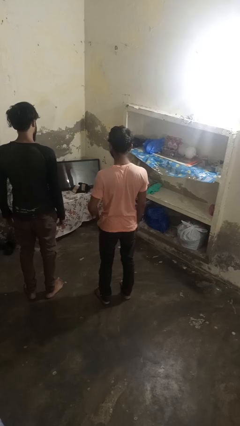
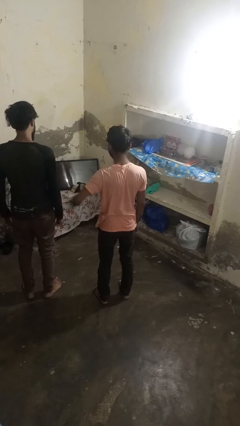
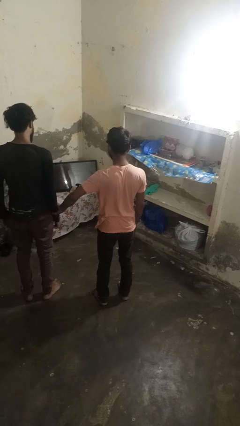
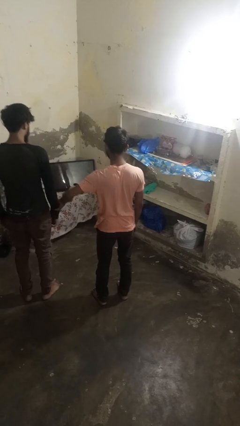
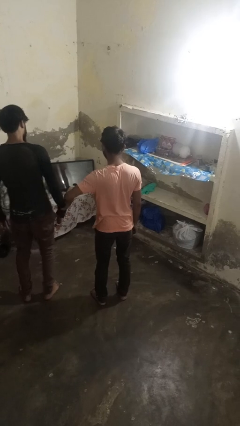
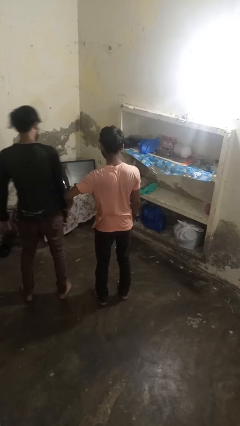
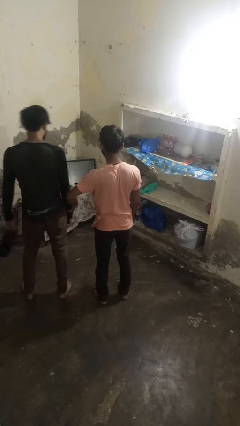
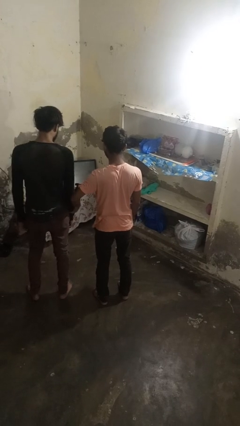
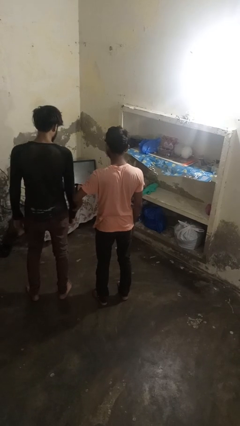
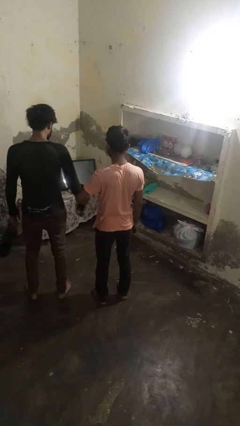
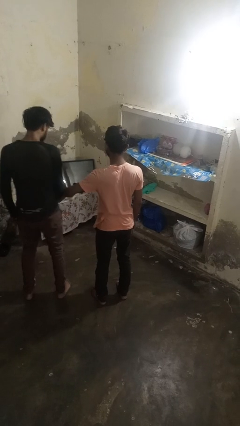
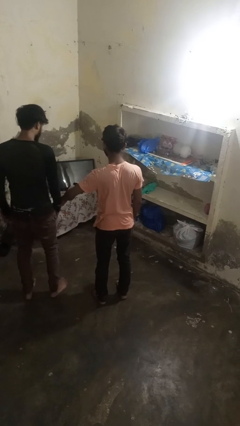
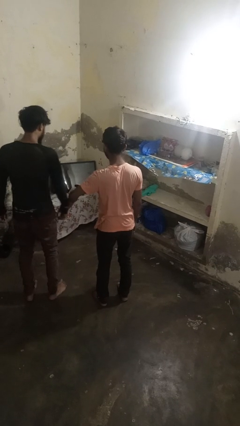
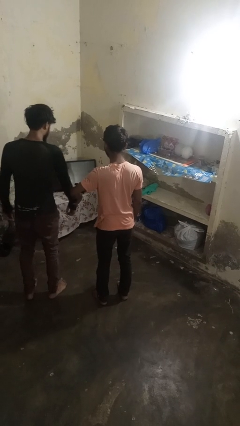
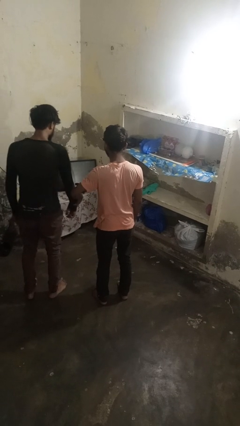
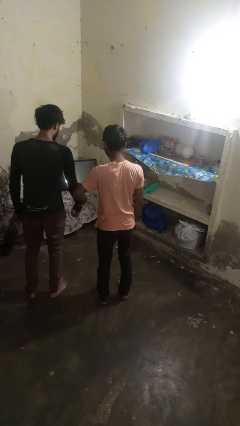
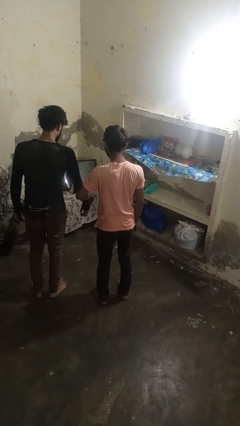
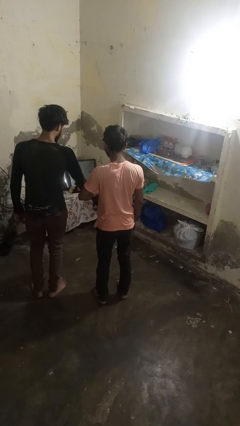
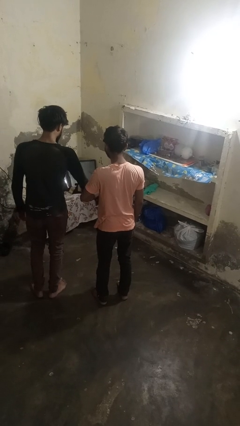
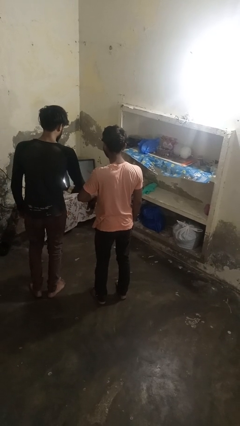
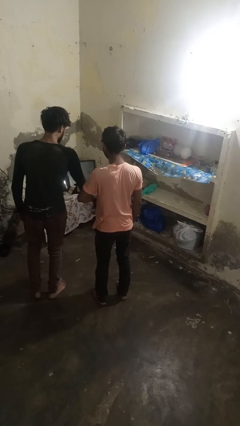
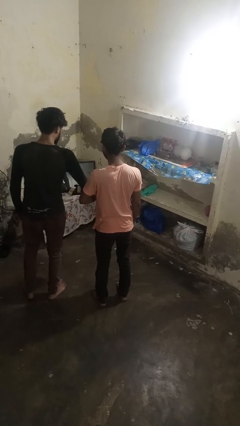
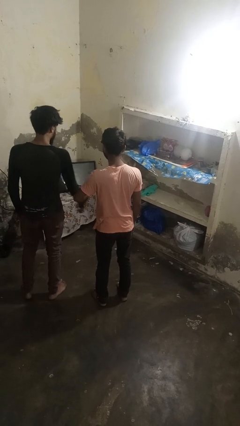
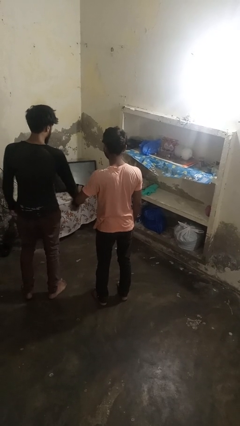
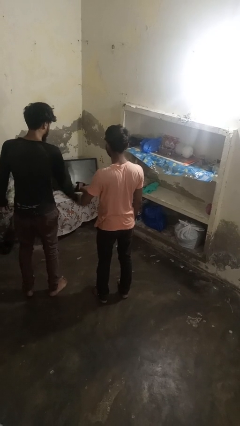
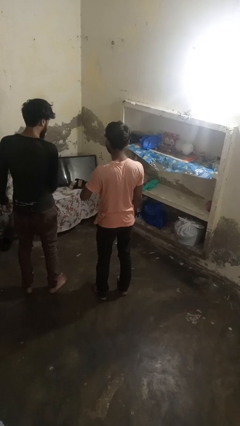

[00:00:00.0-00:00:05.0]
person grabs person by forearm

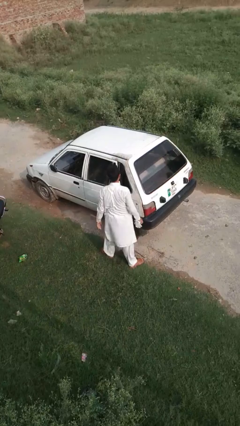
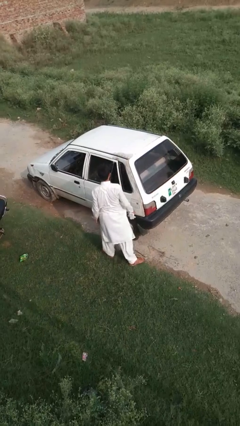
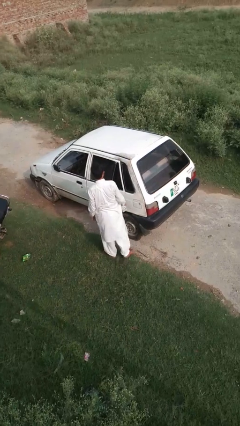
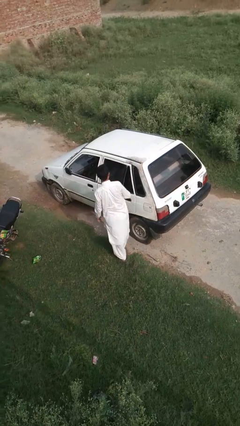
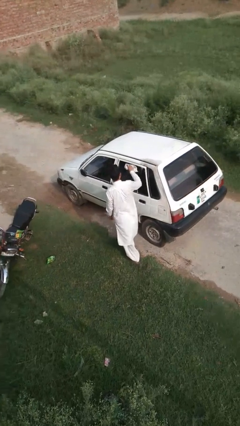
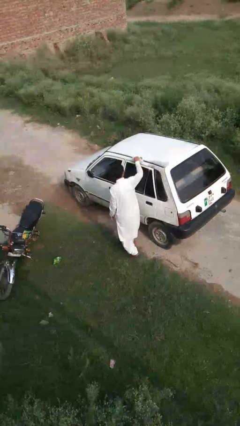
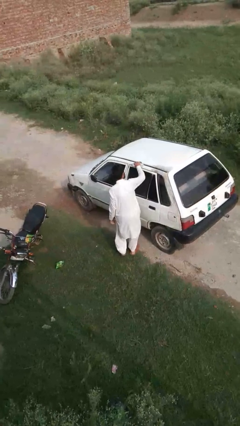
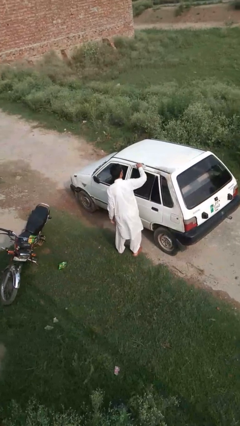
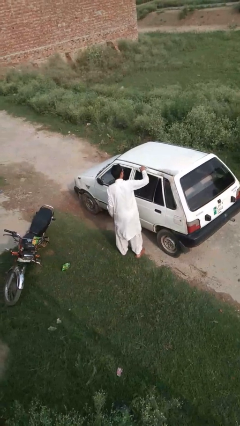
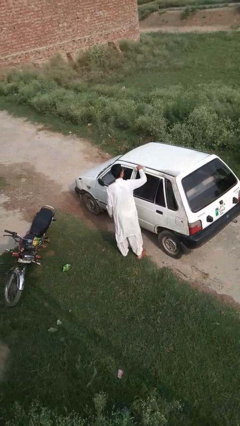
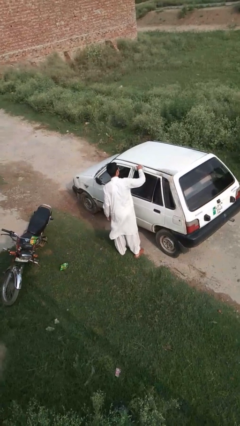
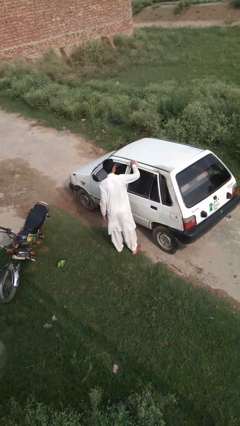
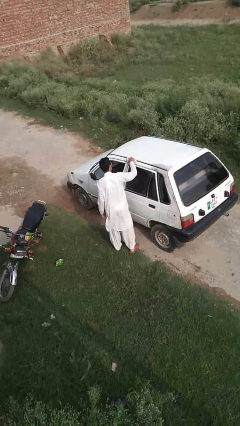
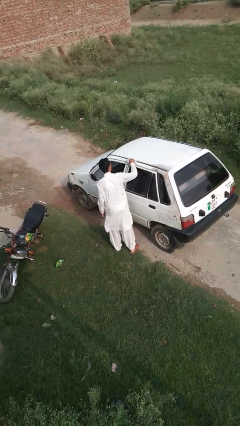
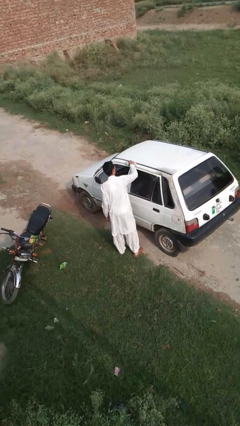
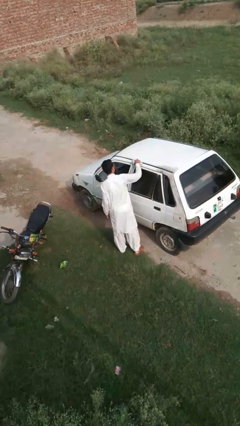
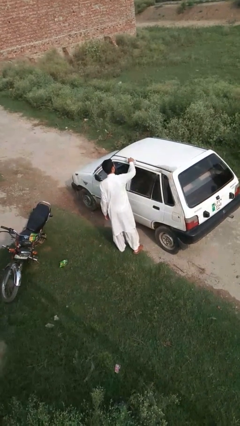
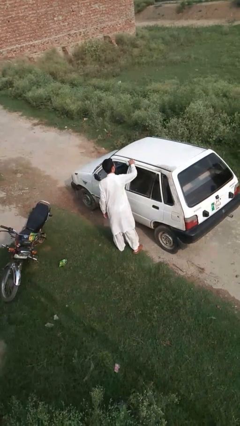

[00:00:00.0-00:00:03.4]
person polishes car with rag

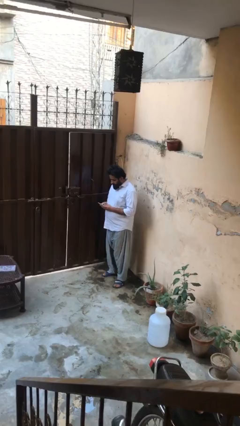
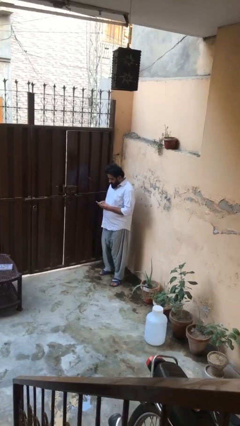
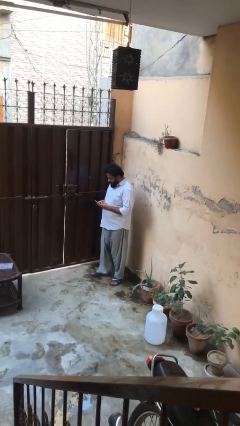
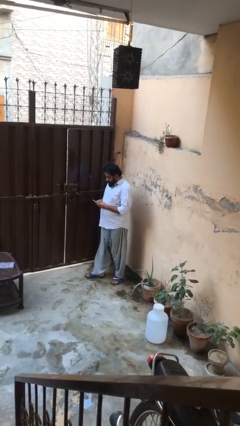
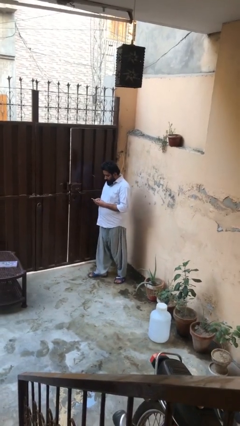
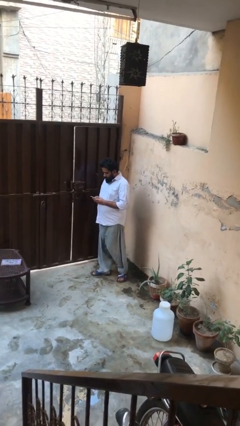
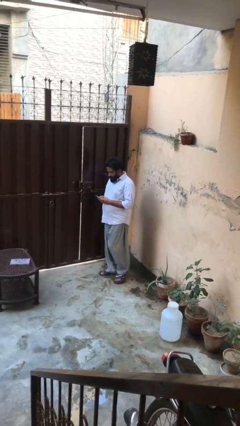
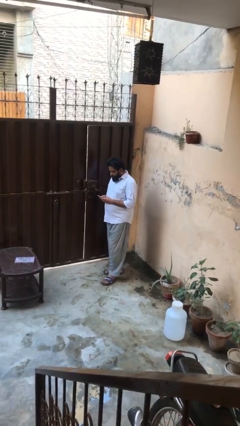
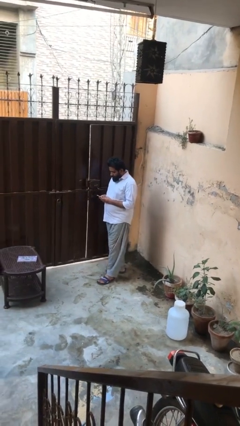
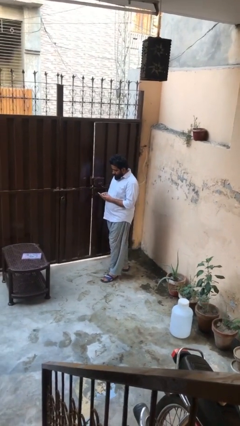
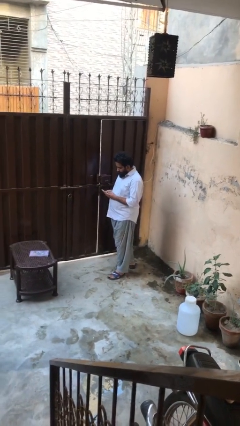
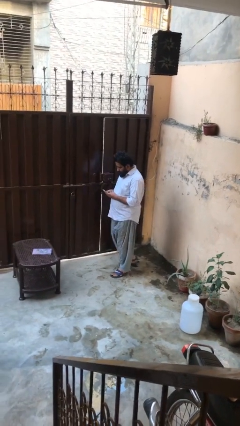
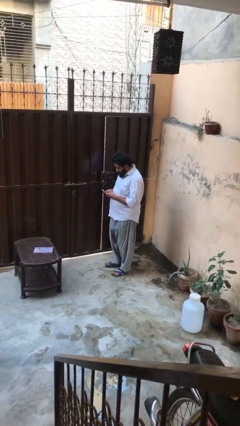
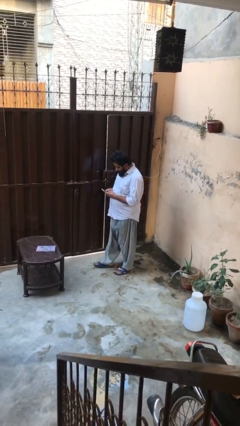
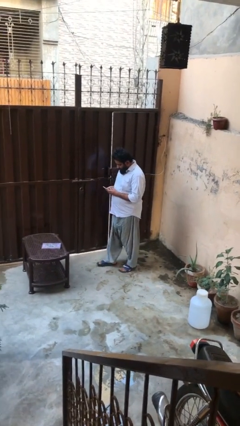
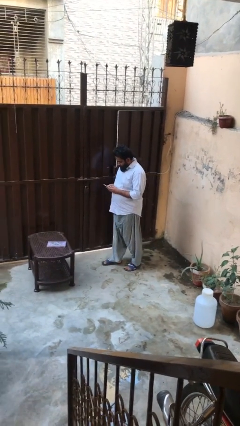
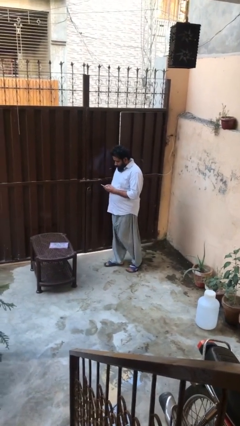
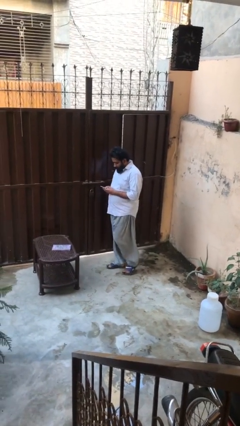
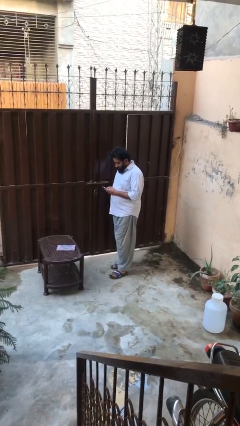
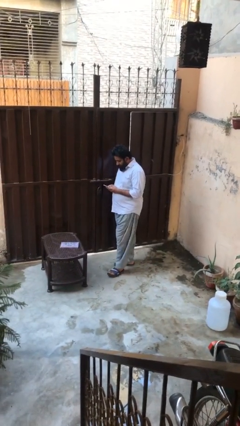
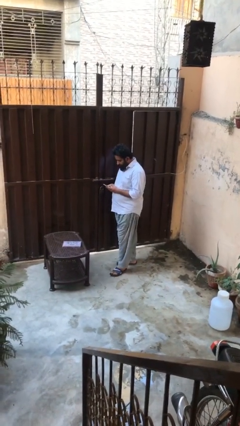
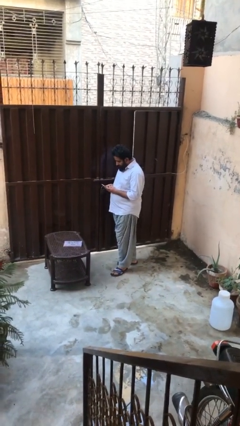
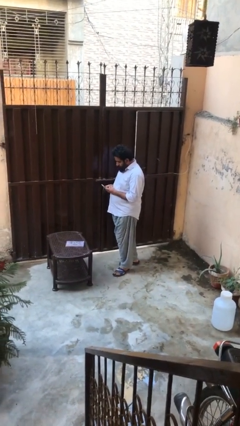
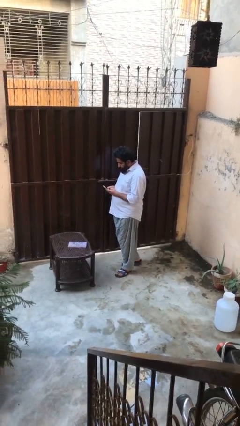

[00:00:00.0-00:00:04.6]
person texts on phone

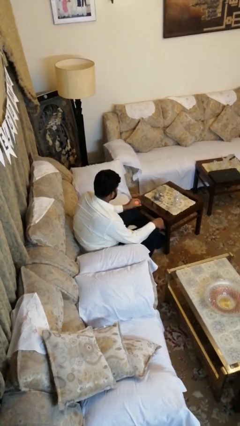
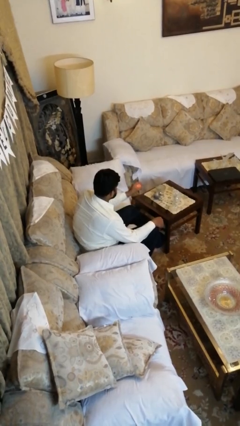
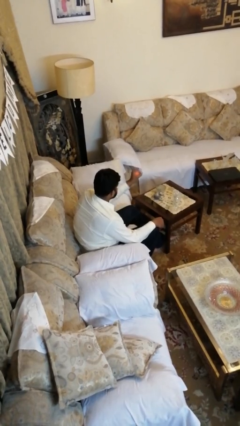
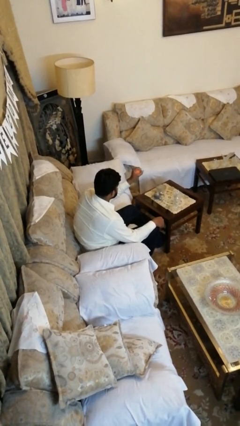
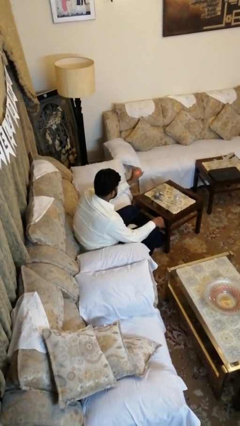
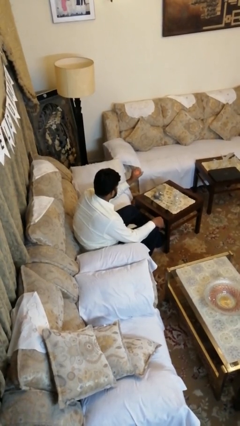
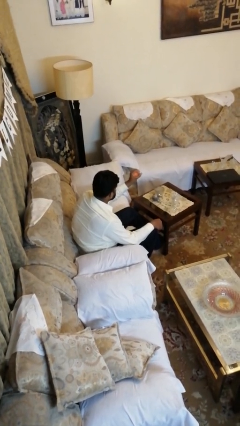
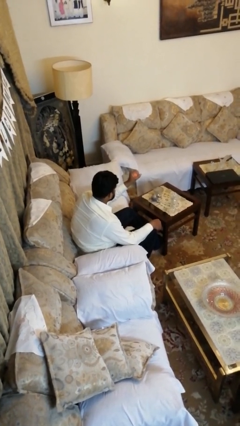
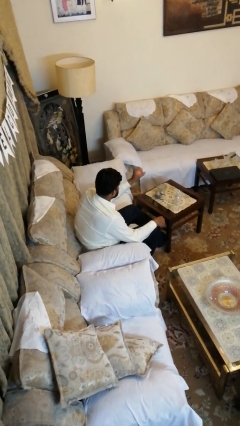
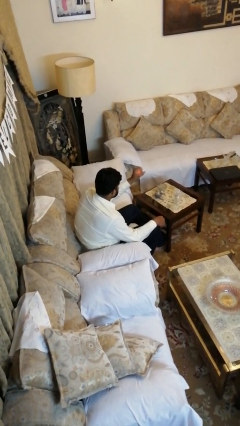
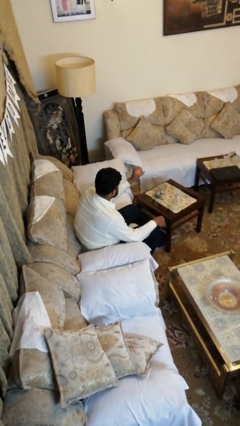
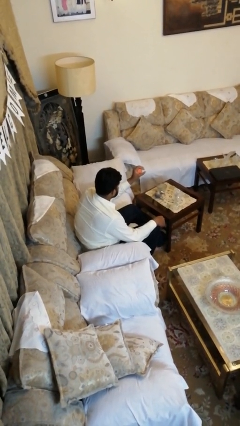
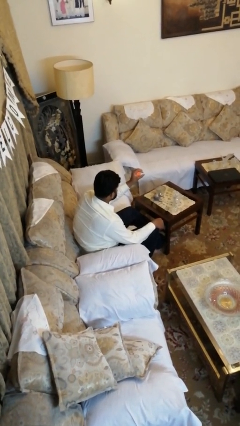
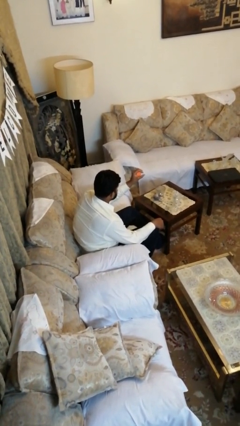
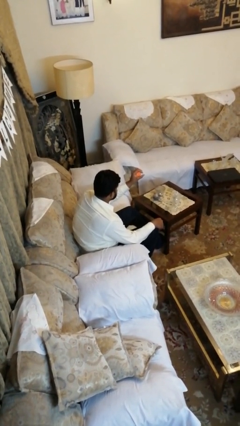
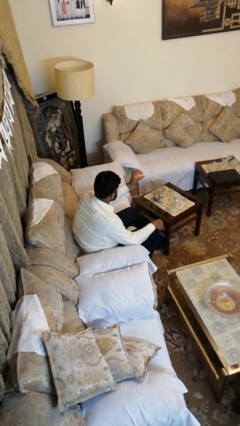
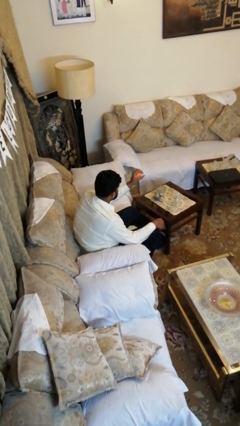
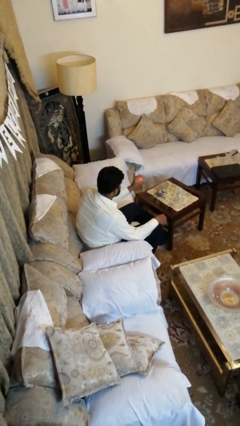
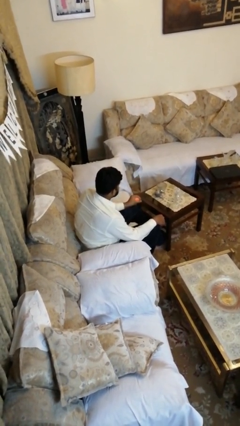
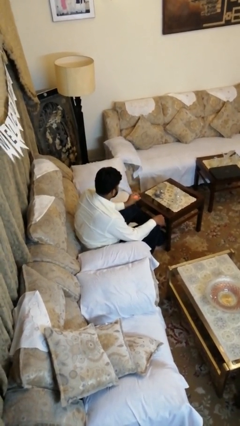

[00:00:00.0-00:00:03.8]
person squeezes object

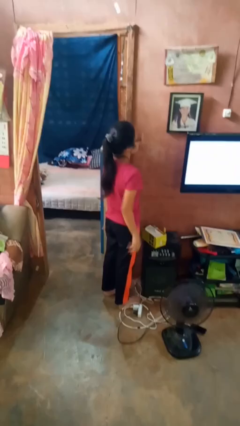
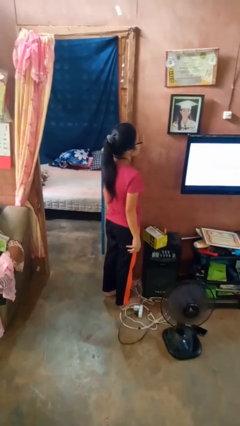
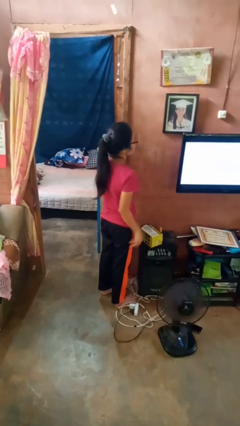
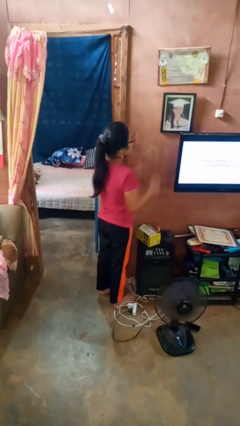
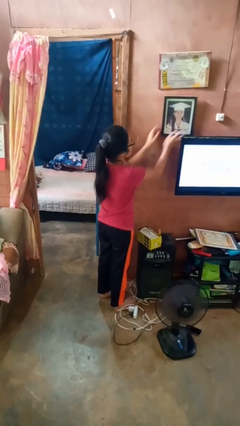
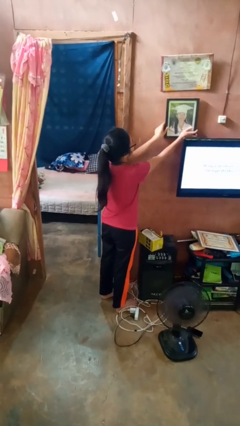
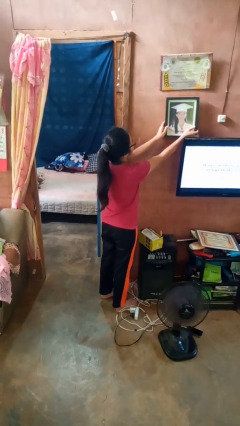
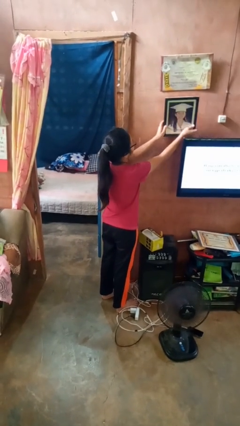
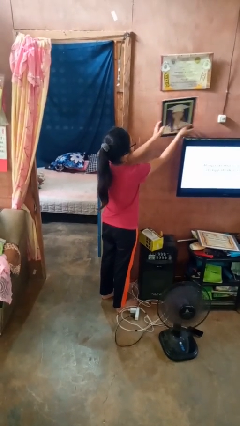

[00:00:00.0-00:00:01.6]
person takes down picture frame
